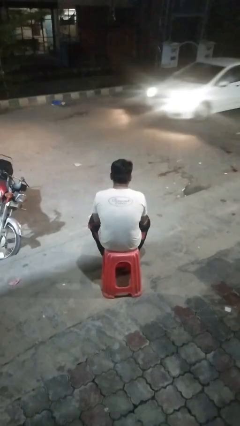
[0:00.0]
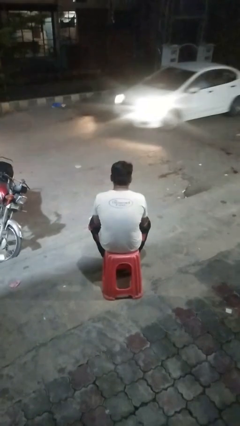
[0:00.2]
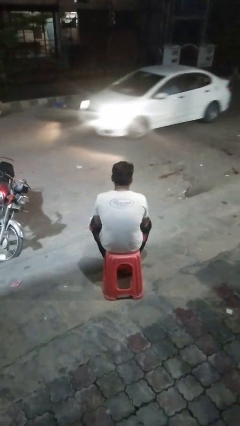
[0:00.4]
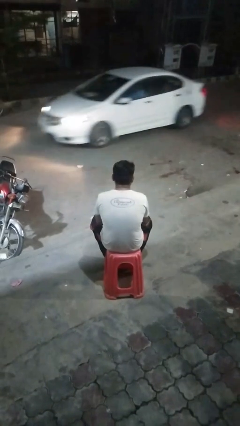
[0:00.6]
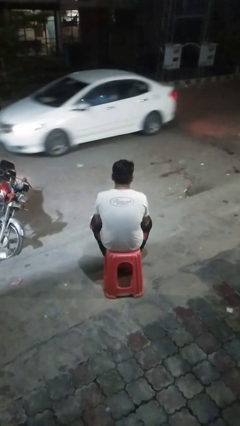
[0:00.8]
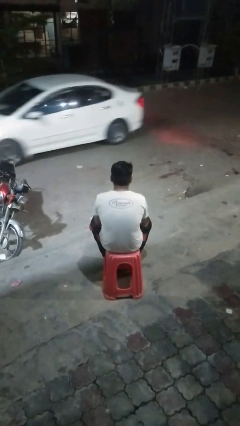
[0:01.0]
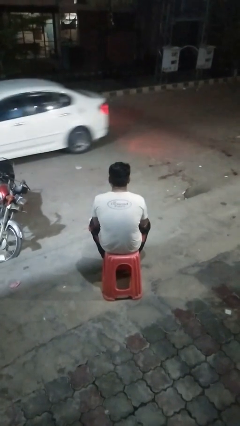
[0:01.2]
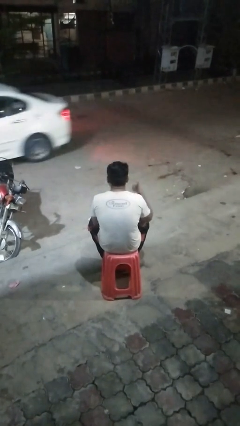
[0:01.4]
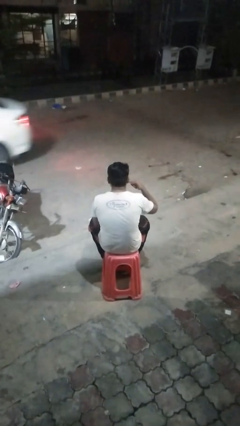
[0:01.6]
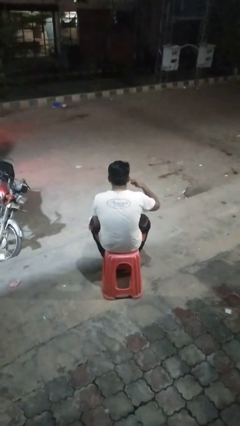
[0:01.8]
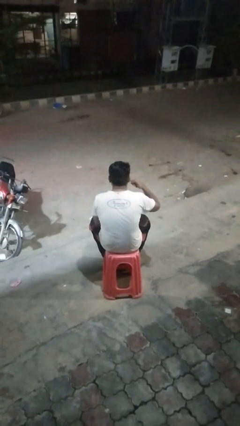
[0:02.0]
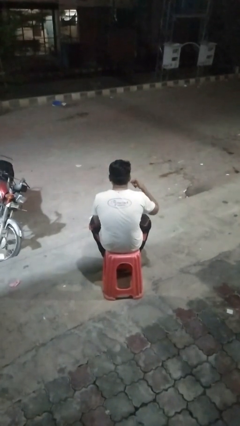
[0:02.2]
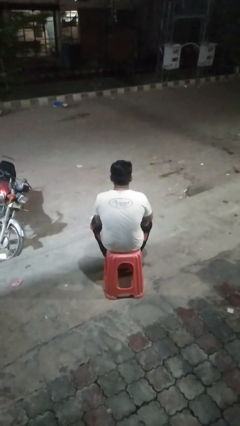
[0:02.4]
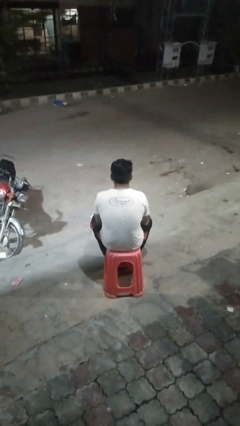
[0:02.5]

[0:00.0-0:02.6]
person gestures call me

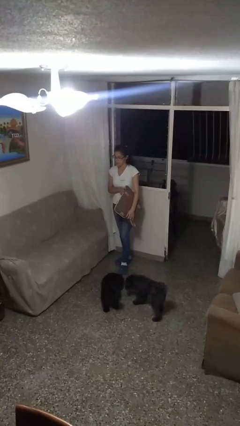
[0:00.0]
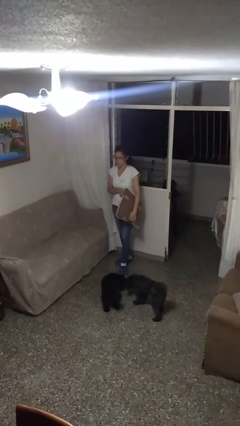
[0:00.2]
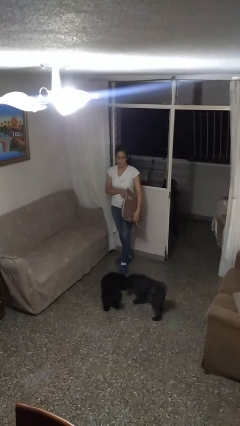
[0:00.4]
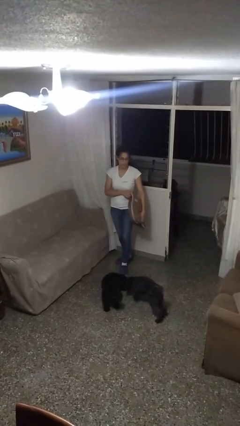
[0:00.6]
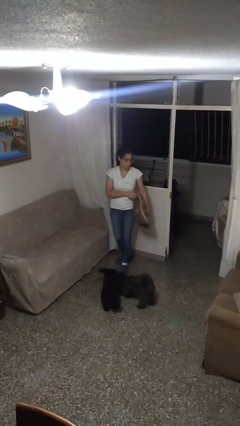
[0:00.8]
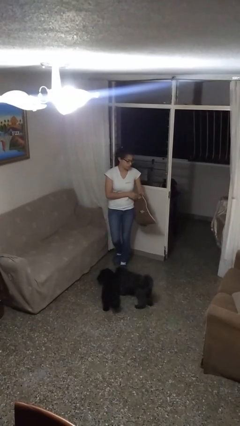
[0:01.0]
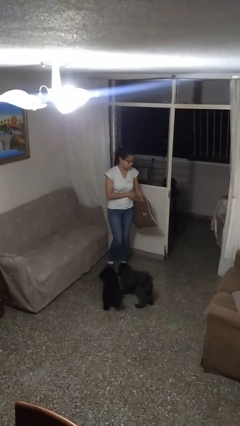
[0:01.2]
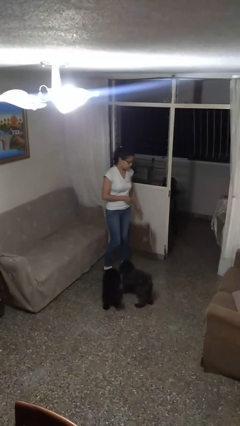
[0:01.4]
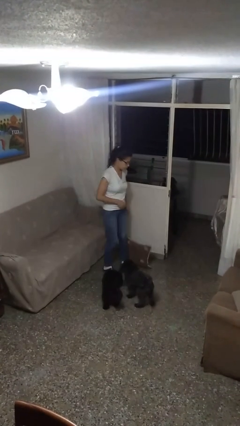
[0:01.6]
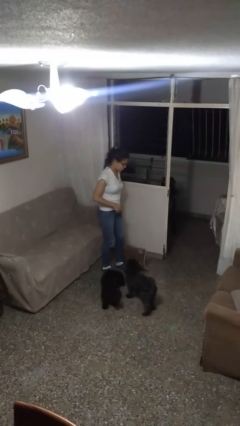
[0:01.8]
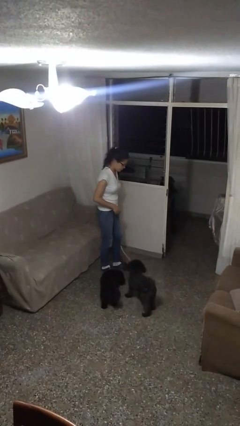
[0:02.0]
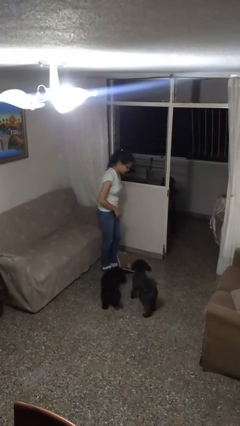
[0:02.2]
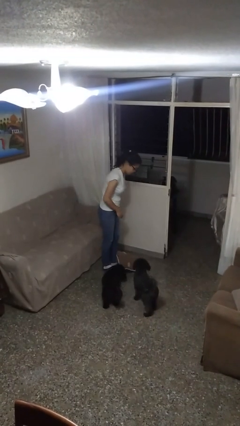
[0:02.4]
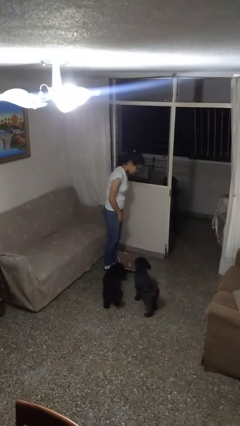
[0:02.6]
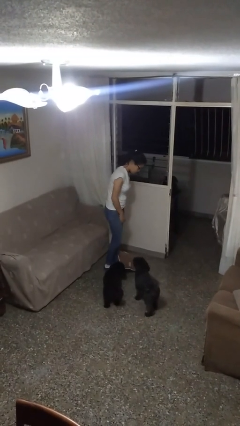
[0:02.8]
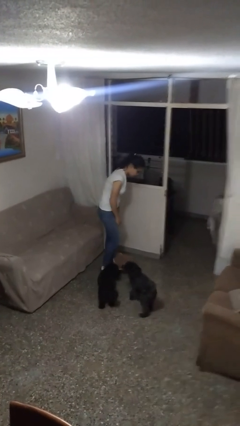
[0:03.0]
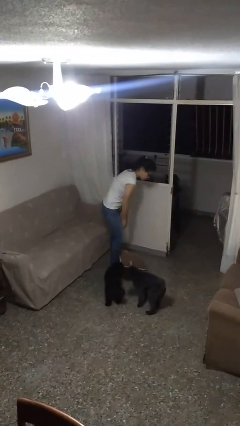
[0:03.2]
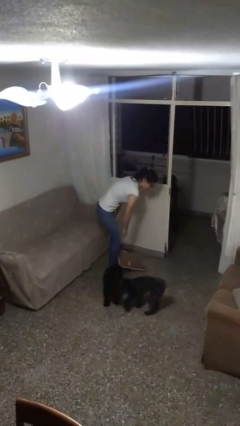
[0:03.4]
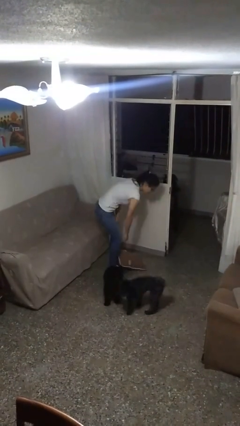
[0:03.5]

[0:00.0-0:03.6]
person drops object

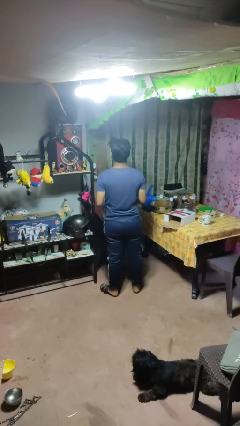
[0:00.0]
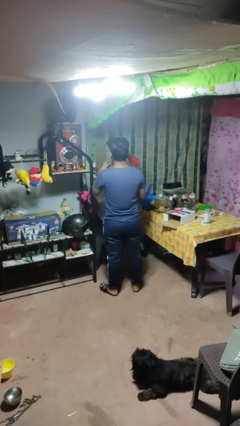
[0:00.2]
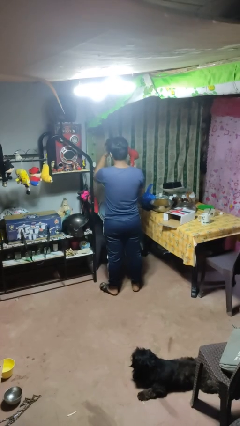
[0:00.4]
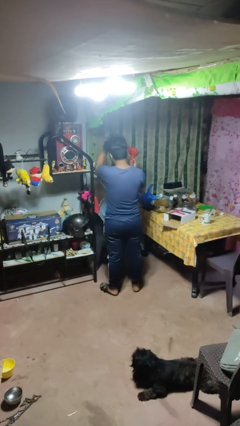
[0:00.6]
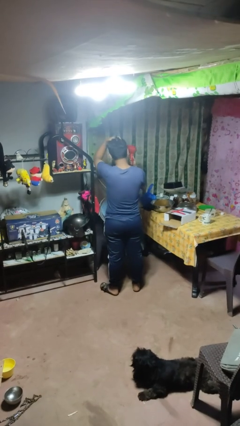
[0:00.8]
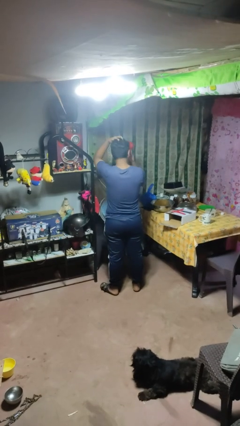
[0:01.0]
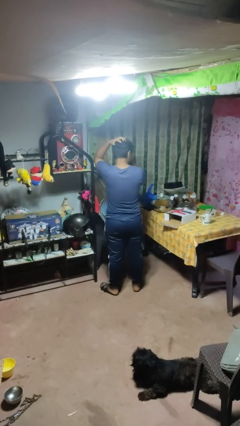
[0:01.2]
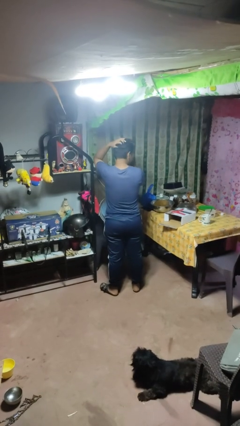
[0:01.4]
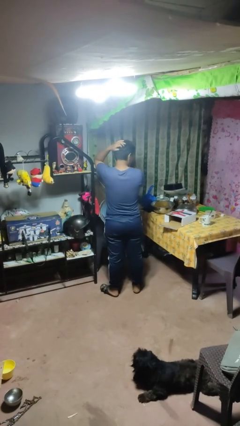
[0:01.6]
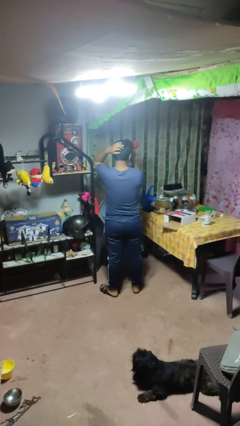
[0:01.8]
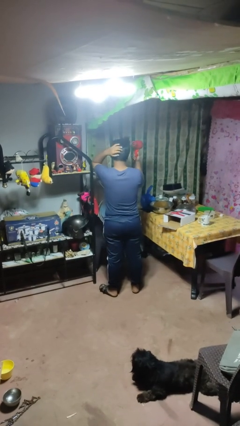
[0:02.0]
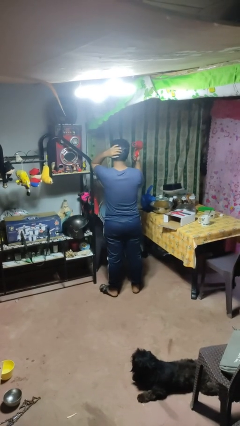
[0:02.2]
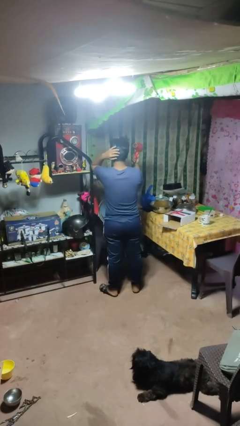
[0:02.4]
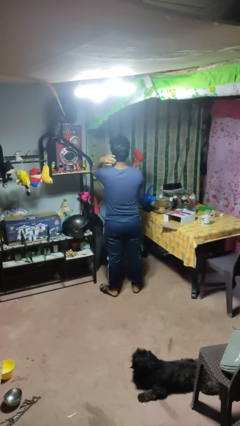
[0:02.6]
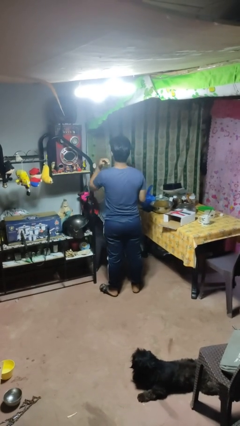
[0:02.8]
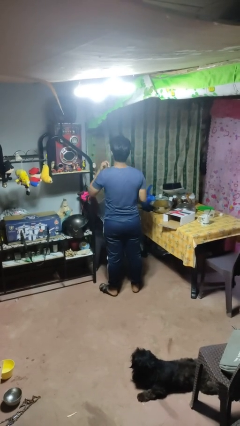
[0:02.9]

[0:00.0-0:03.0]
person dries hair with hairdryer

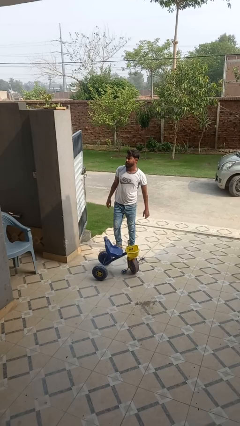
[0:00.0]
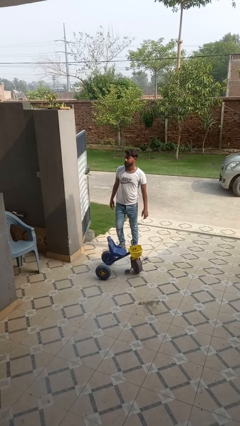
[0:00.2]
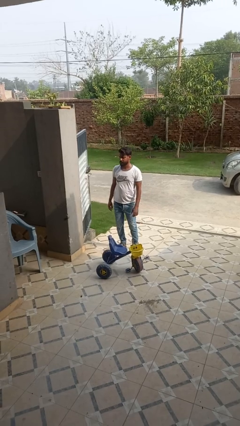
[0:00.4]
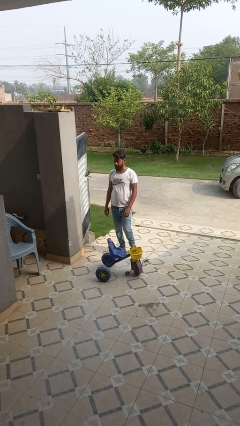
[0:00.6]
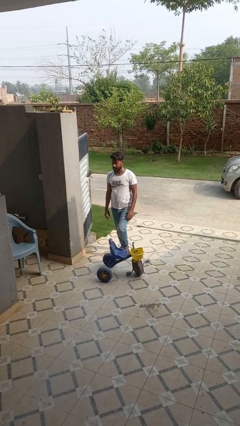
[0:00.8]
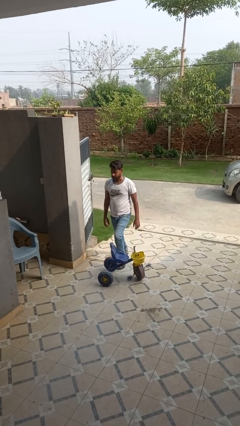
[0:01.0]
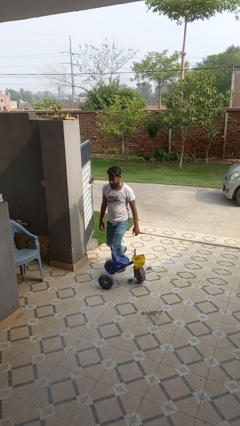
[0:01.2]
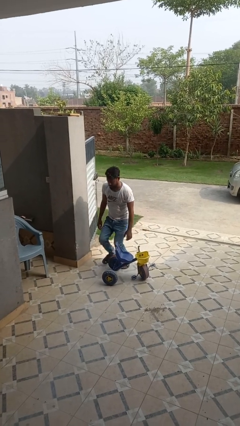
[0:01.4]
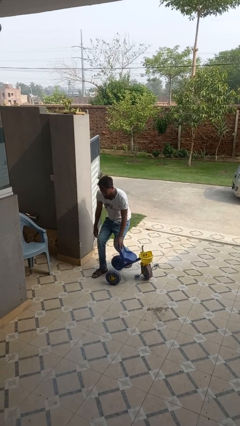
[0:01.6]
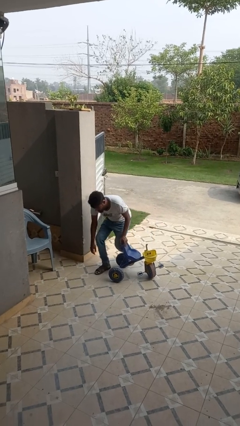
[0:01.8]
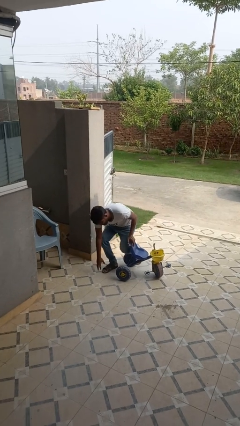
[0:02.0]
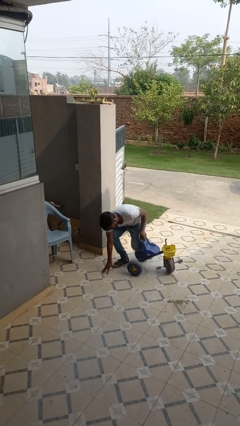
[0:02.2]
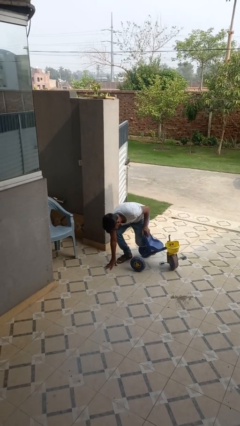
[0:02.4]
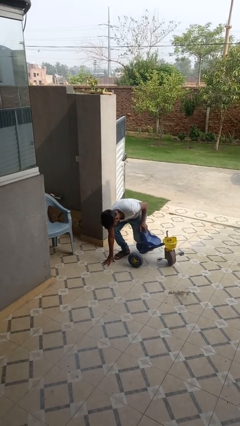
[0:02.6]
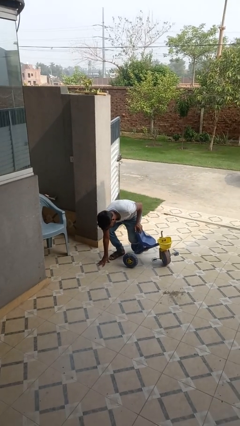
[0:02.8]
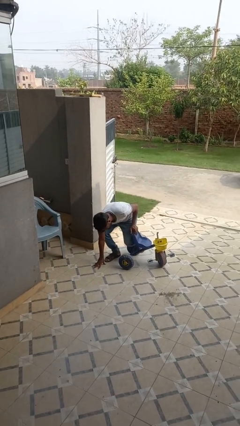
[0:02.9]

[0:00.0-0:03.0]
person trips on object on floor

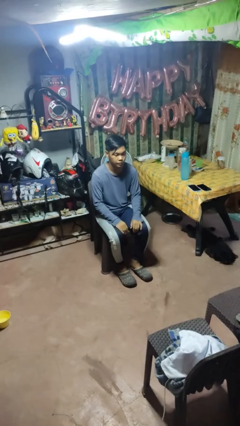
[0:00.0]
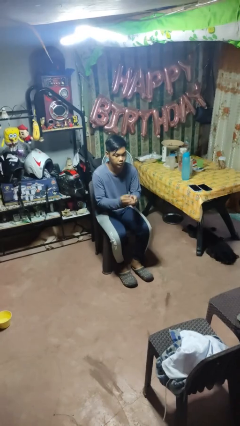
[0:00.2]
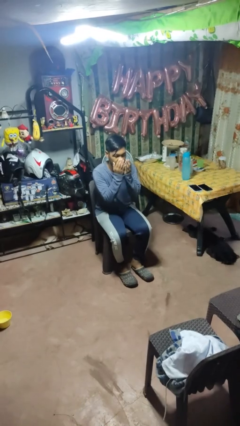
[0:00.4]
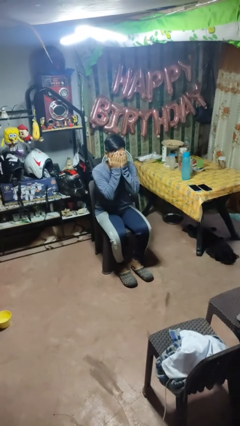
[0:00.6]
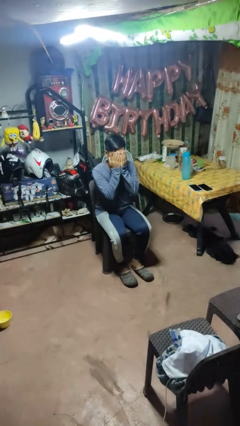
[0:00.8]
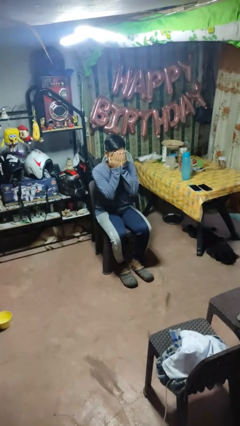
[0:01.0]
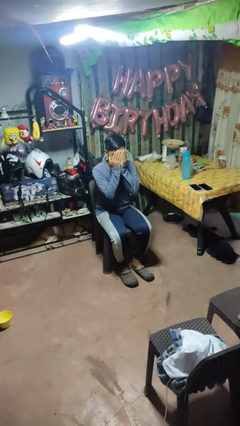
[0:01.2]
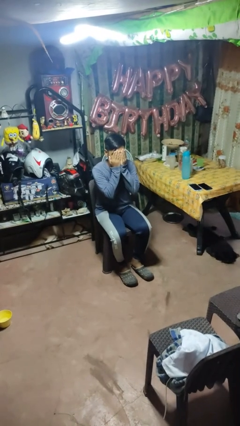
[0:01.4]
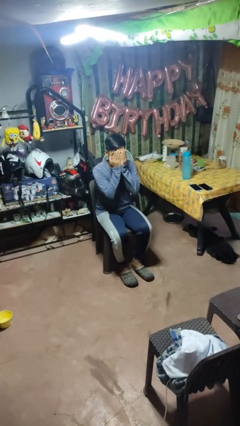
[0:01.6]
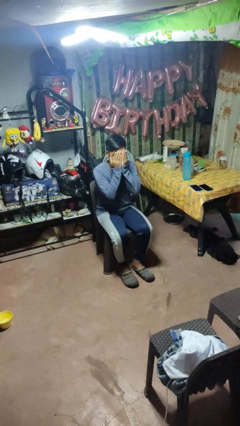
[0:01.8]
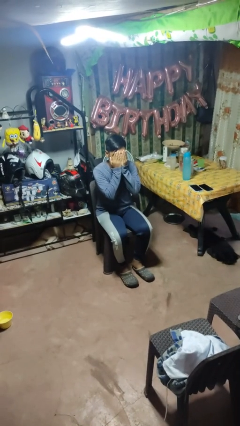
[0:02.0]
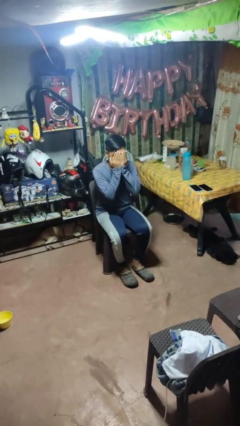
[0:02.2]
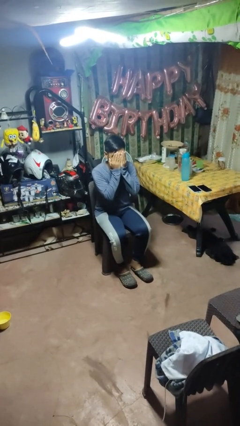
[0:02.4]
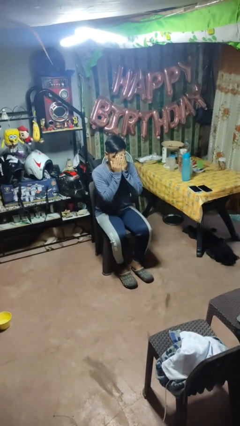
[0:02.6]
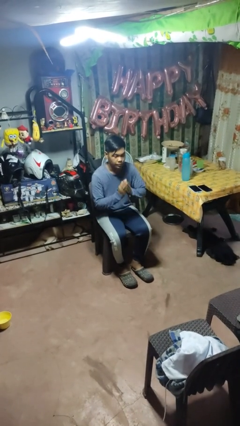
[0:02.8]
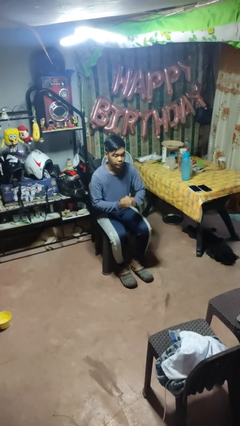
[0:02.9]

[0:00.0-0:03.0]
person covers face with hands

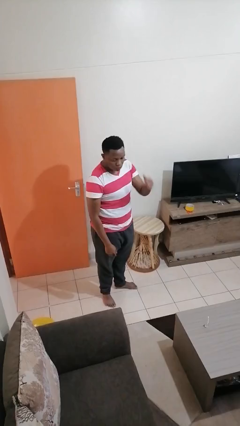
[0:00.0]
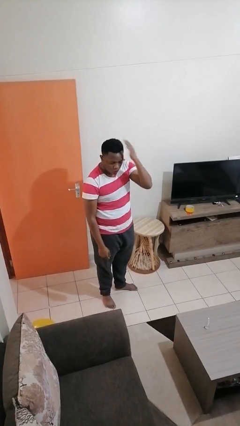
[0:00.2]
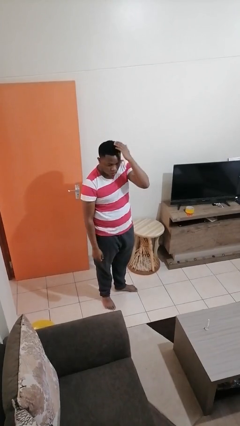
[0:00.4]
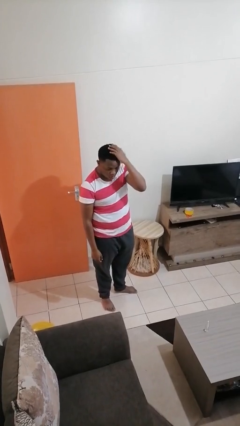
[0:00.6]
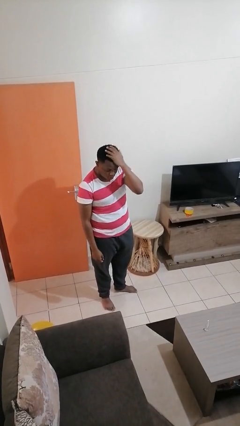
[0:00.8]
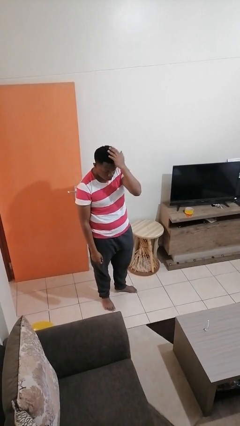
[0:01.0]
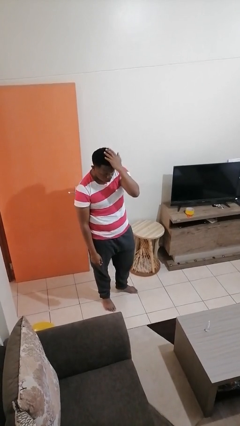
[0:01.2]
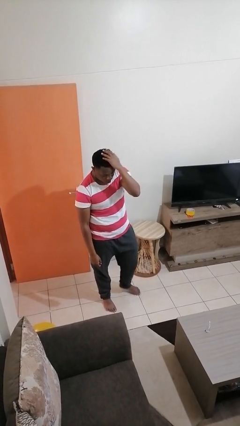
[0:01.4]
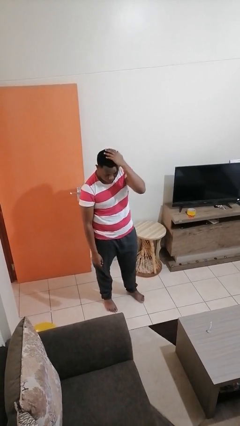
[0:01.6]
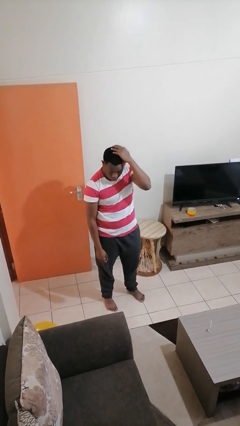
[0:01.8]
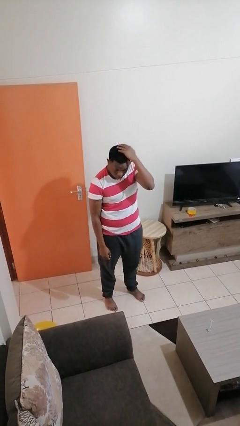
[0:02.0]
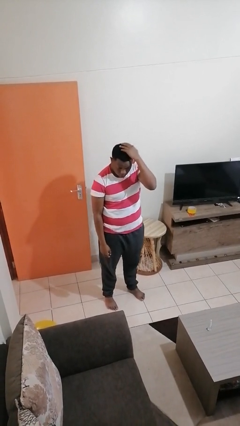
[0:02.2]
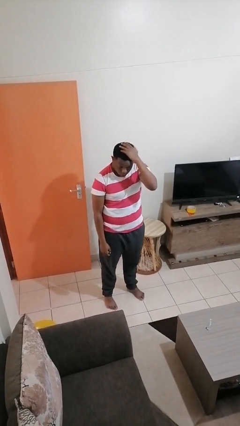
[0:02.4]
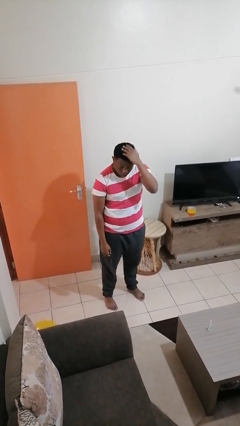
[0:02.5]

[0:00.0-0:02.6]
person pats head
